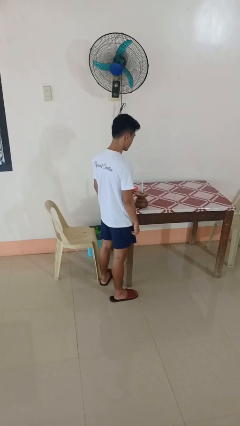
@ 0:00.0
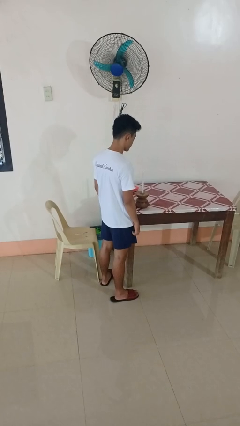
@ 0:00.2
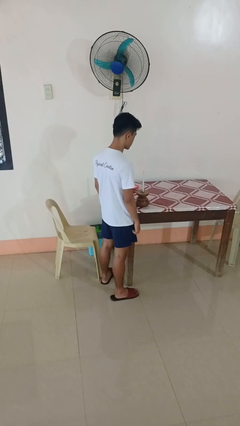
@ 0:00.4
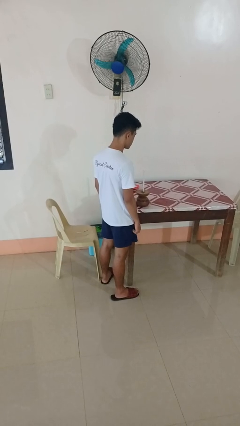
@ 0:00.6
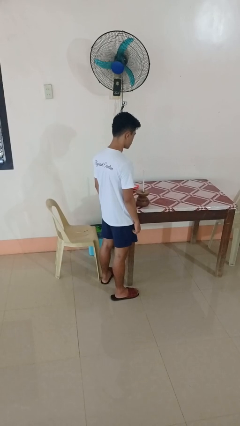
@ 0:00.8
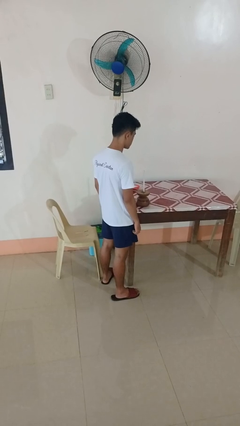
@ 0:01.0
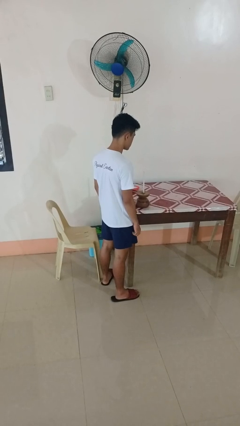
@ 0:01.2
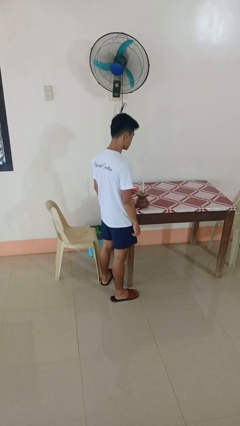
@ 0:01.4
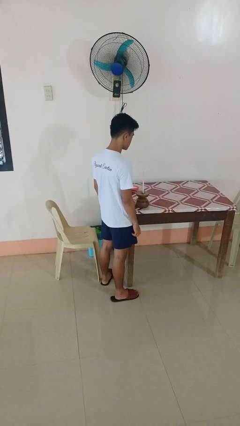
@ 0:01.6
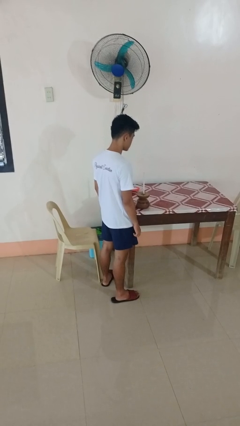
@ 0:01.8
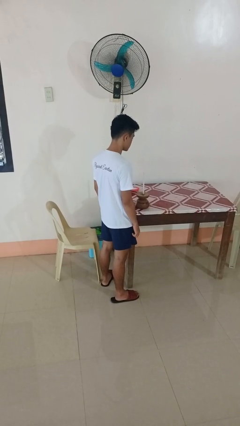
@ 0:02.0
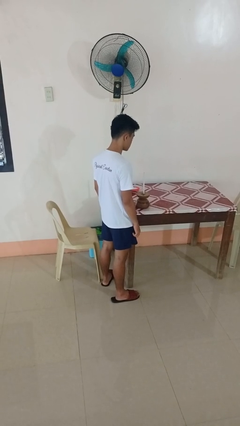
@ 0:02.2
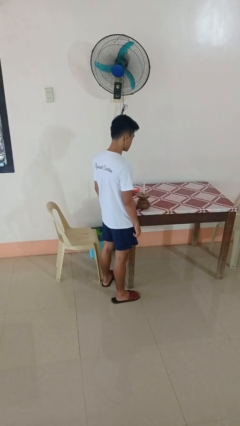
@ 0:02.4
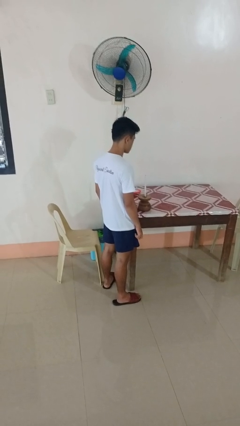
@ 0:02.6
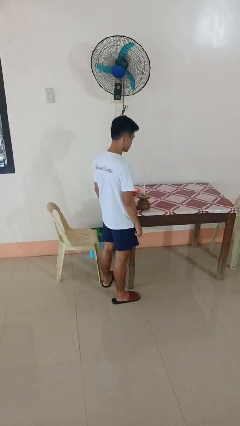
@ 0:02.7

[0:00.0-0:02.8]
person extinguishes candle

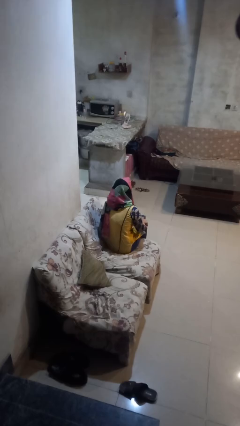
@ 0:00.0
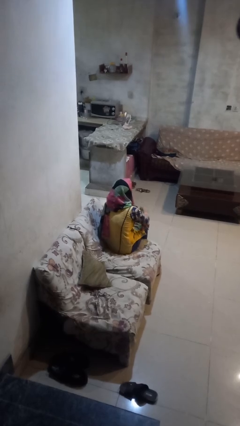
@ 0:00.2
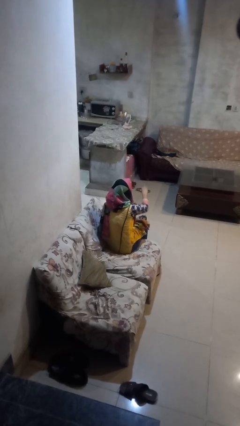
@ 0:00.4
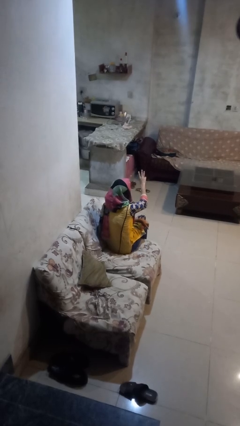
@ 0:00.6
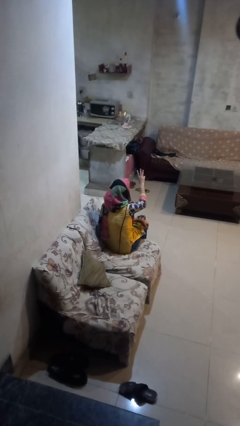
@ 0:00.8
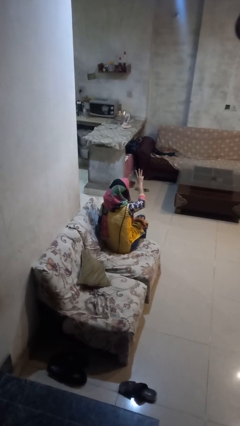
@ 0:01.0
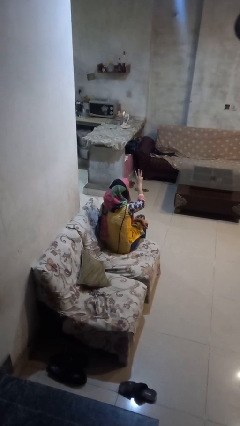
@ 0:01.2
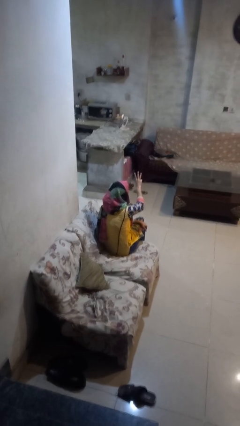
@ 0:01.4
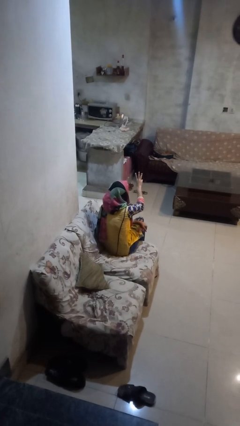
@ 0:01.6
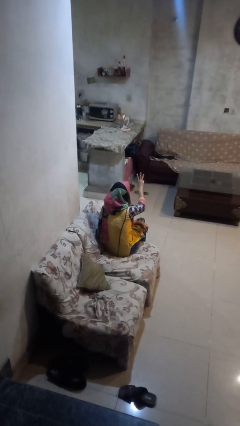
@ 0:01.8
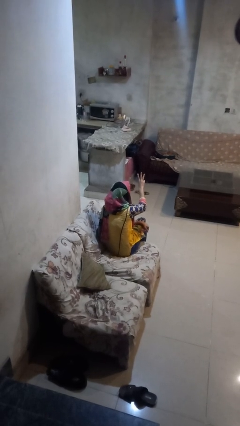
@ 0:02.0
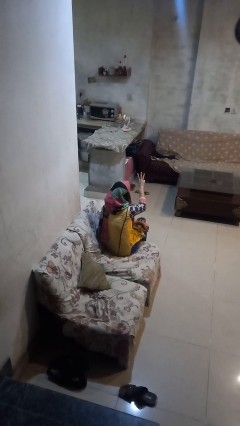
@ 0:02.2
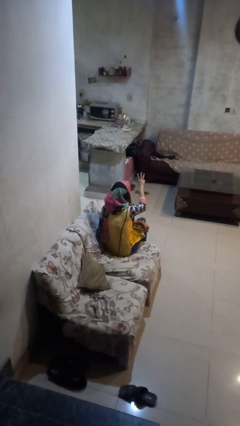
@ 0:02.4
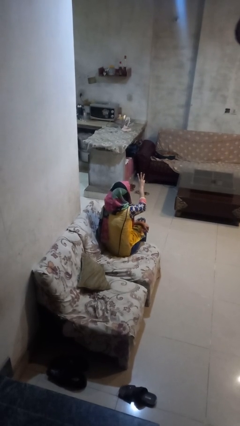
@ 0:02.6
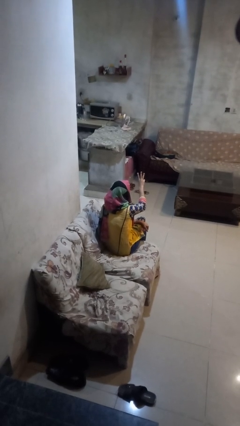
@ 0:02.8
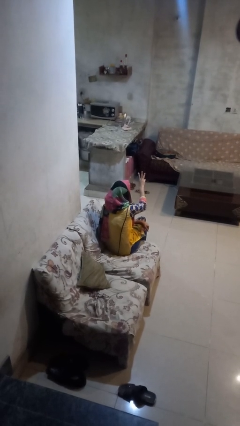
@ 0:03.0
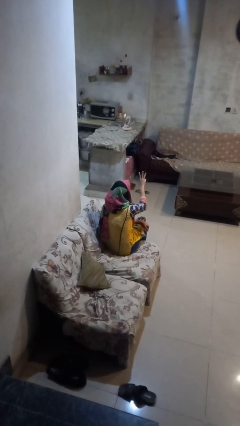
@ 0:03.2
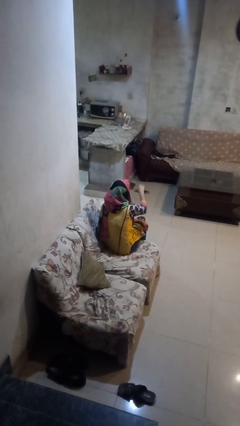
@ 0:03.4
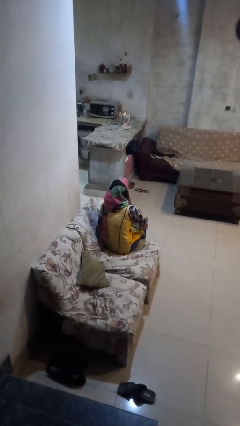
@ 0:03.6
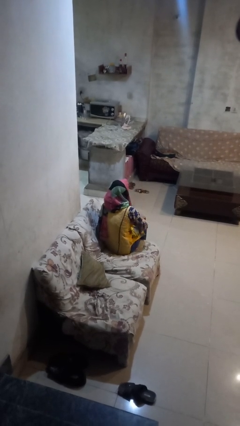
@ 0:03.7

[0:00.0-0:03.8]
person gestures number three

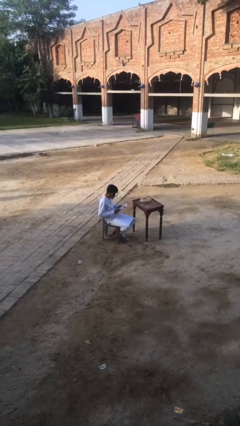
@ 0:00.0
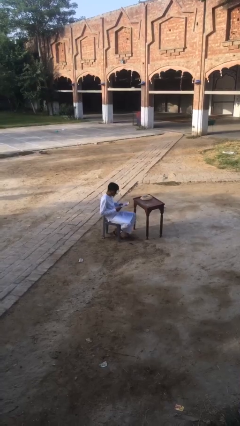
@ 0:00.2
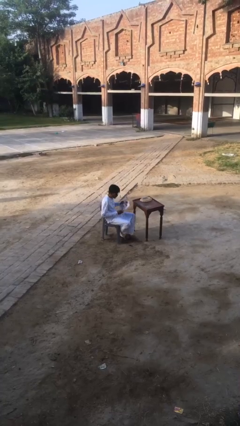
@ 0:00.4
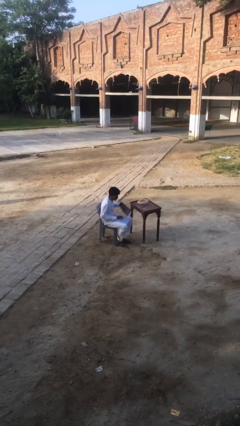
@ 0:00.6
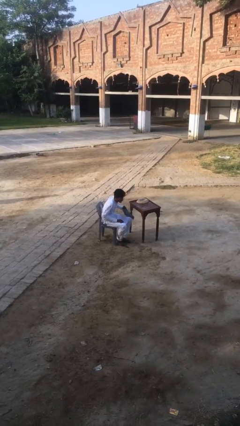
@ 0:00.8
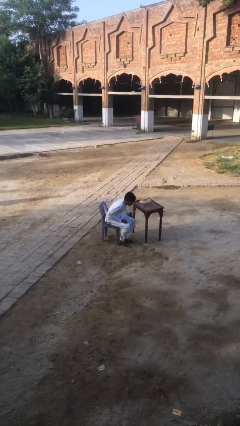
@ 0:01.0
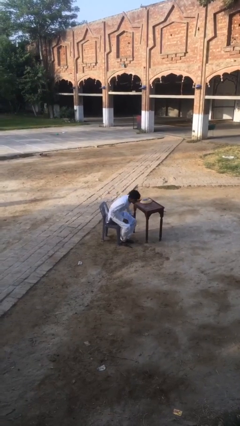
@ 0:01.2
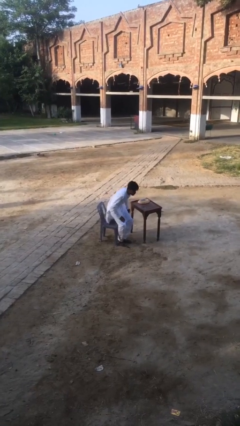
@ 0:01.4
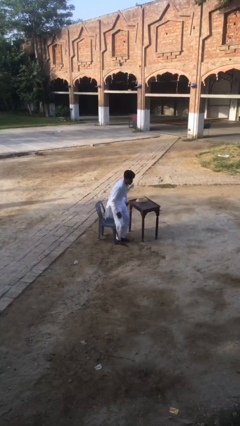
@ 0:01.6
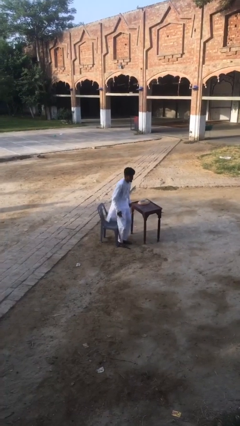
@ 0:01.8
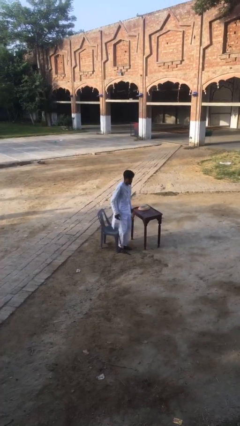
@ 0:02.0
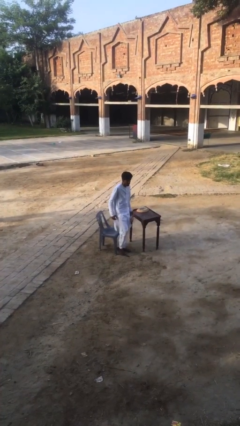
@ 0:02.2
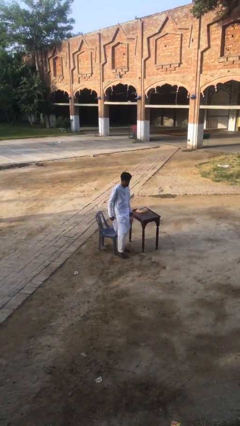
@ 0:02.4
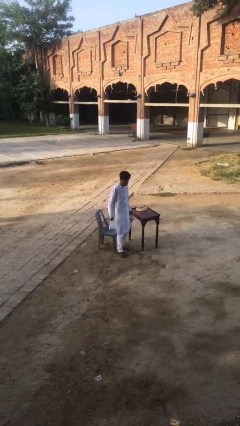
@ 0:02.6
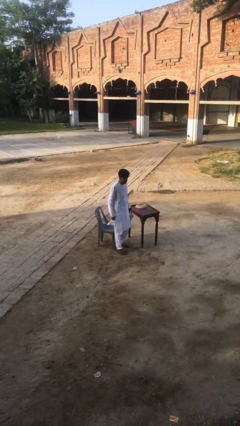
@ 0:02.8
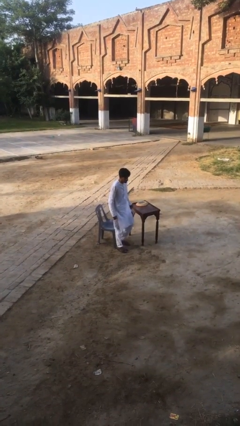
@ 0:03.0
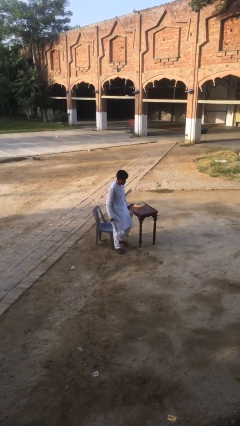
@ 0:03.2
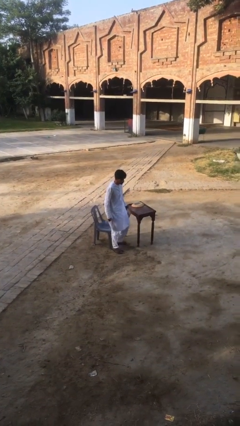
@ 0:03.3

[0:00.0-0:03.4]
person stands up

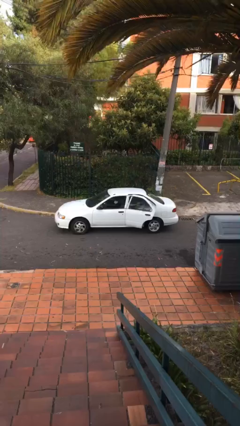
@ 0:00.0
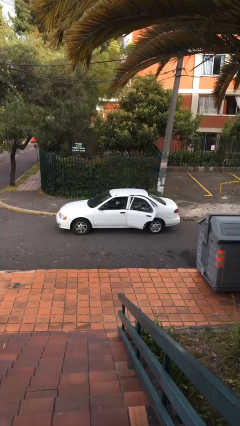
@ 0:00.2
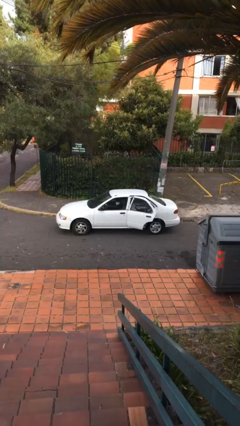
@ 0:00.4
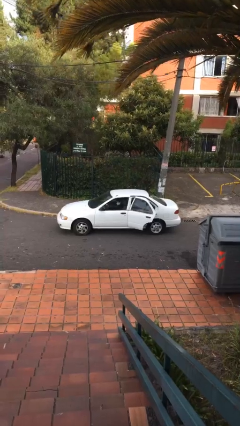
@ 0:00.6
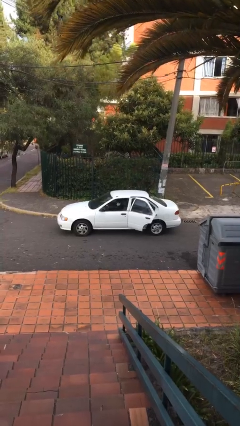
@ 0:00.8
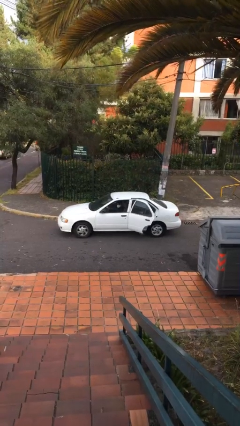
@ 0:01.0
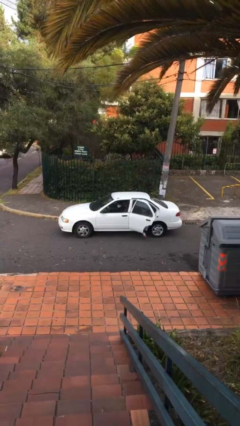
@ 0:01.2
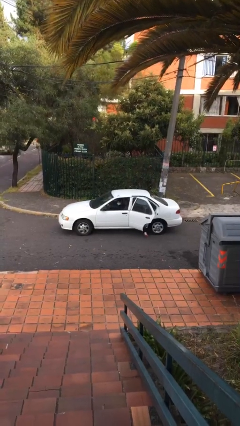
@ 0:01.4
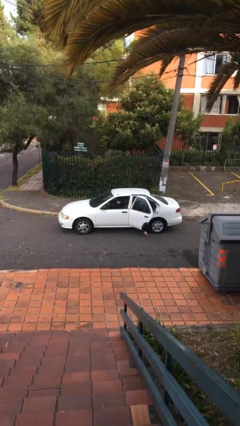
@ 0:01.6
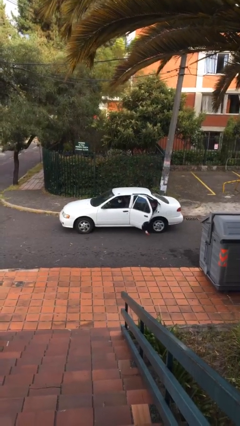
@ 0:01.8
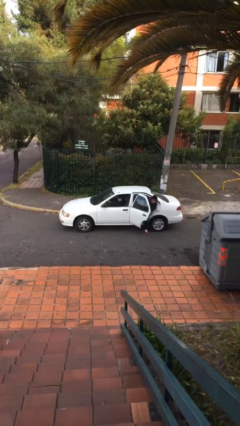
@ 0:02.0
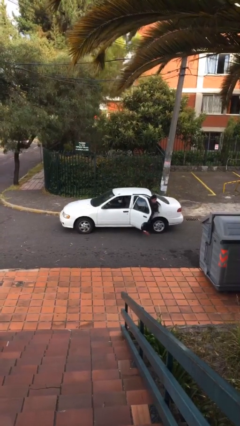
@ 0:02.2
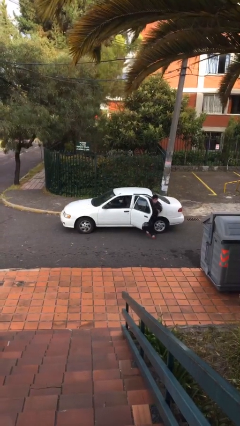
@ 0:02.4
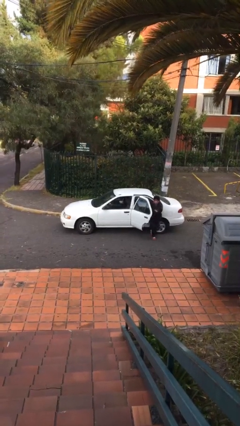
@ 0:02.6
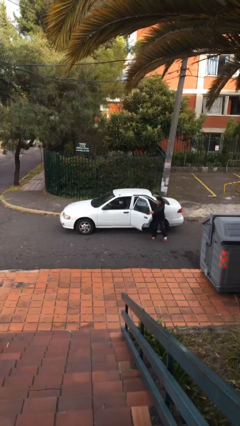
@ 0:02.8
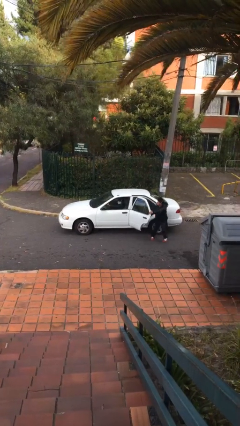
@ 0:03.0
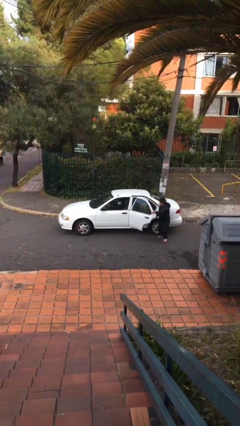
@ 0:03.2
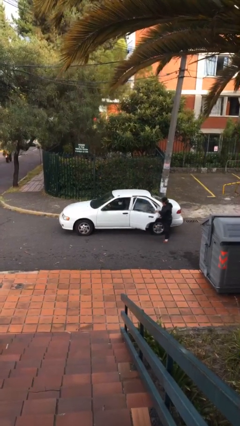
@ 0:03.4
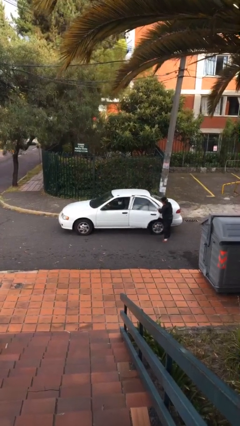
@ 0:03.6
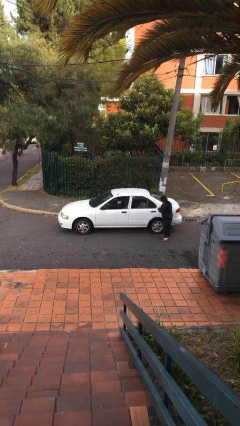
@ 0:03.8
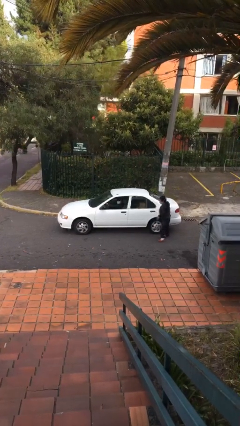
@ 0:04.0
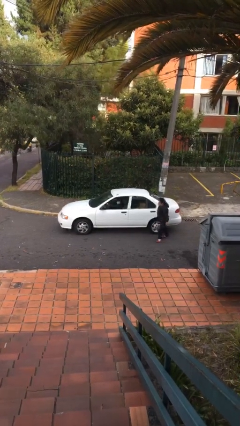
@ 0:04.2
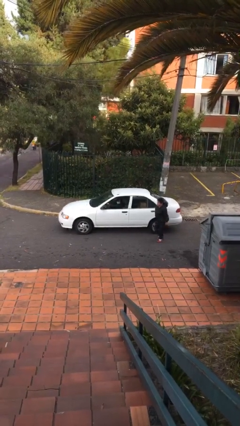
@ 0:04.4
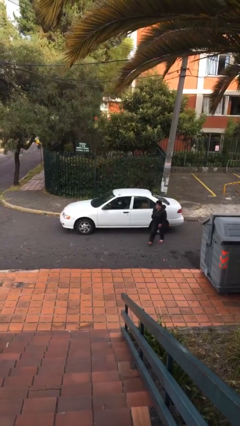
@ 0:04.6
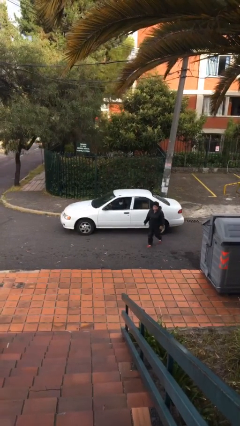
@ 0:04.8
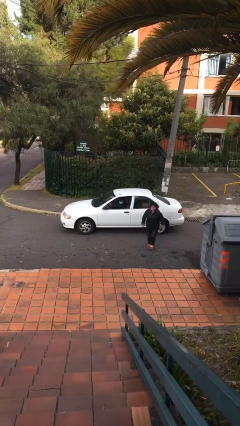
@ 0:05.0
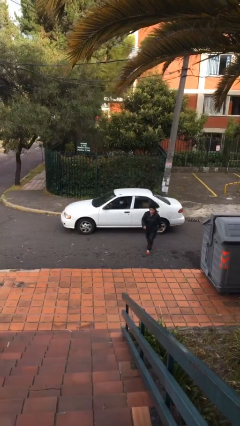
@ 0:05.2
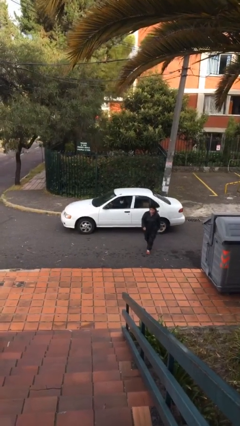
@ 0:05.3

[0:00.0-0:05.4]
car drops off person

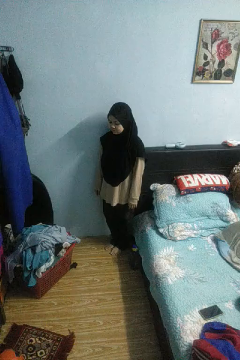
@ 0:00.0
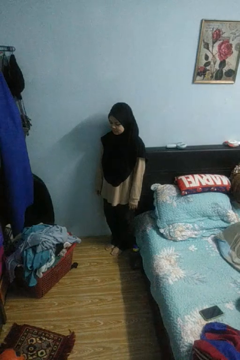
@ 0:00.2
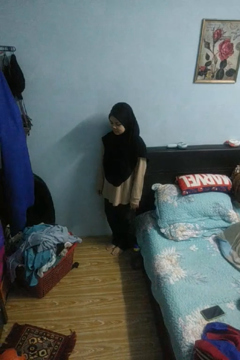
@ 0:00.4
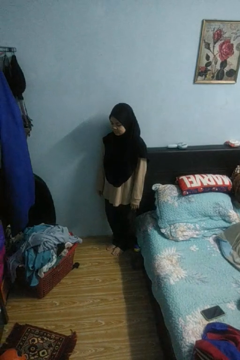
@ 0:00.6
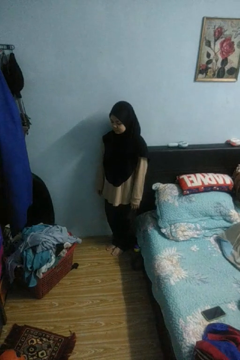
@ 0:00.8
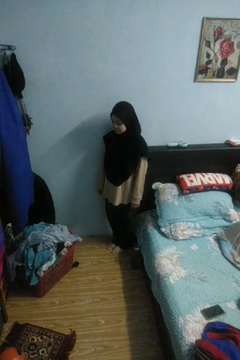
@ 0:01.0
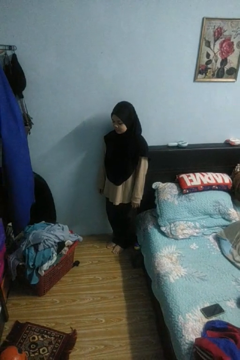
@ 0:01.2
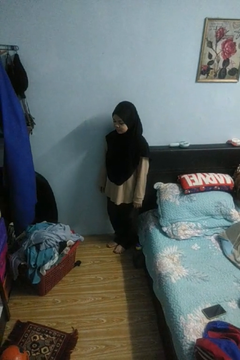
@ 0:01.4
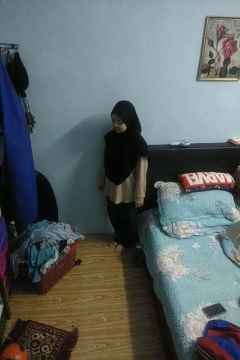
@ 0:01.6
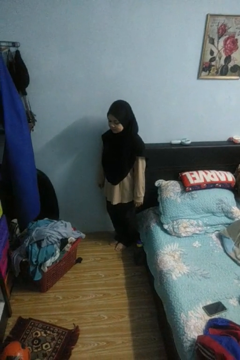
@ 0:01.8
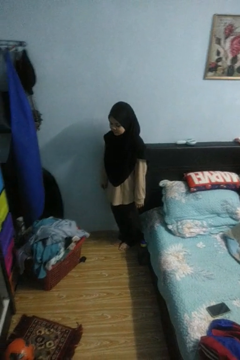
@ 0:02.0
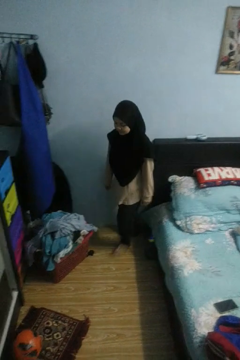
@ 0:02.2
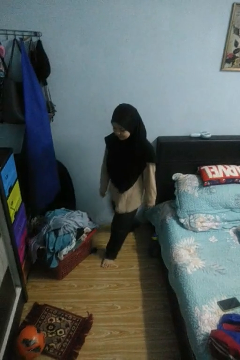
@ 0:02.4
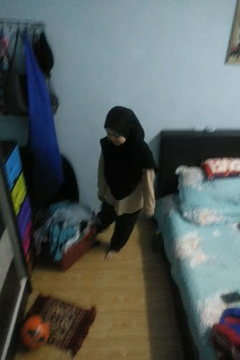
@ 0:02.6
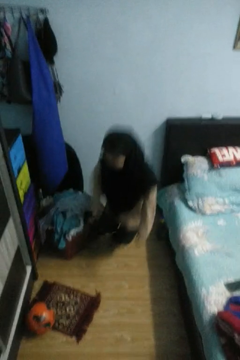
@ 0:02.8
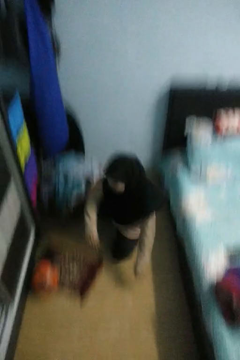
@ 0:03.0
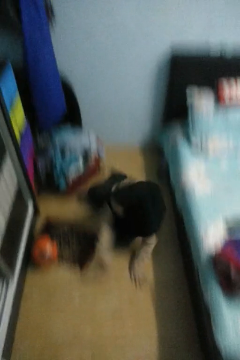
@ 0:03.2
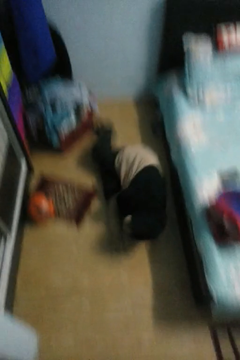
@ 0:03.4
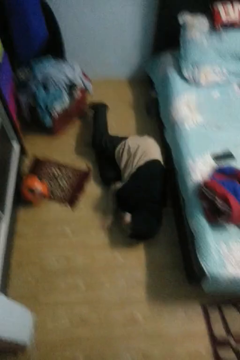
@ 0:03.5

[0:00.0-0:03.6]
person trips on object on floor
